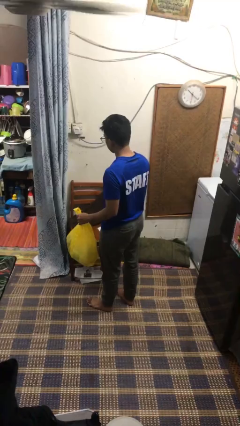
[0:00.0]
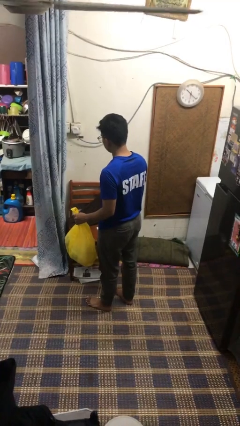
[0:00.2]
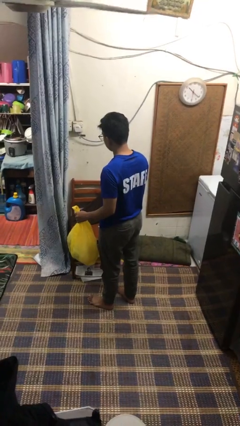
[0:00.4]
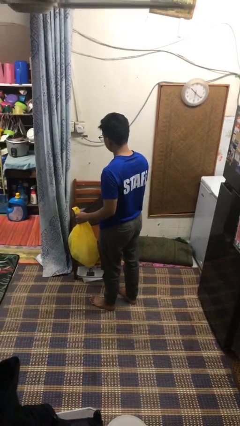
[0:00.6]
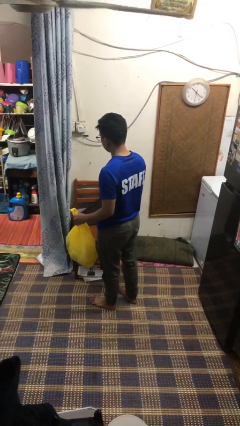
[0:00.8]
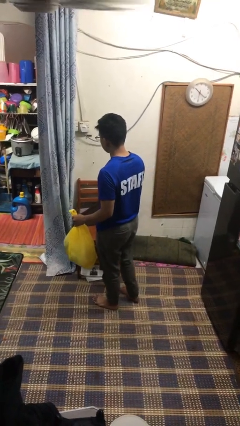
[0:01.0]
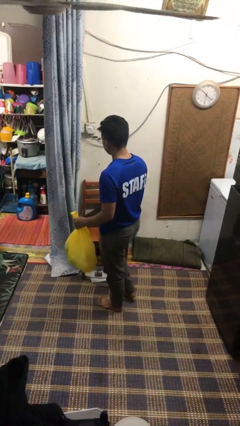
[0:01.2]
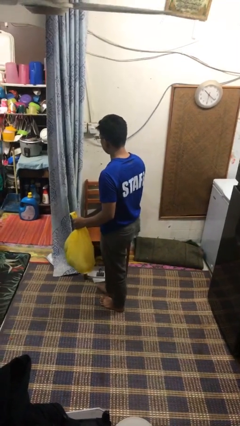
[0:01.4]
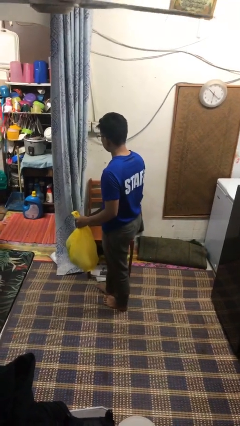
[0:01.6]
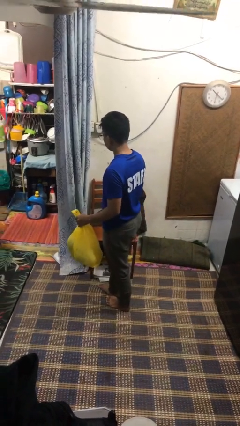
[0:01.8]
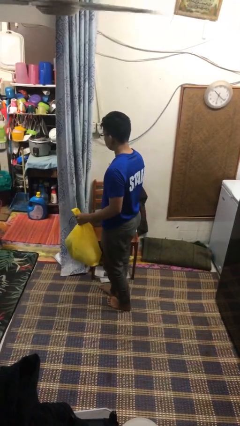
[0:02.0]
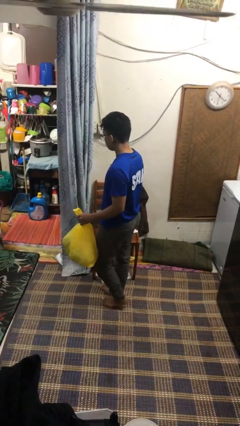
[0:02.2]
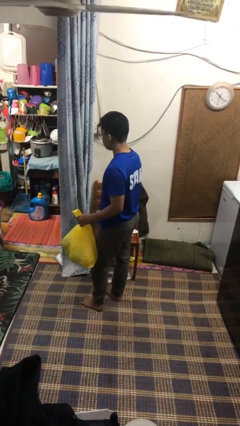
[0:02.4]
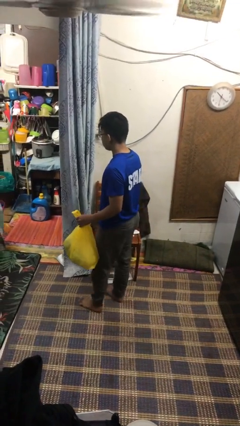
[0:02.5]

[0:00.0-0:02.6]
person carries groceries

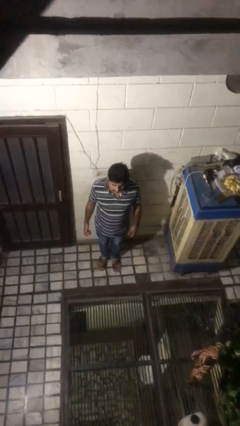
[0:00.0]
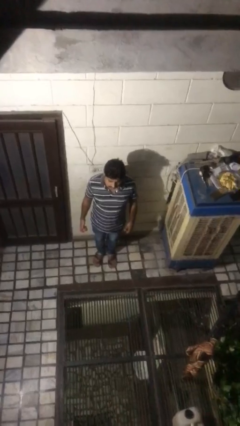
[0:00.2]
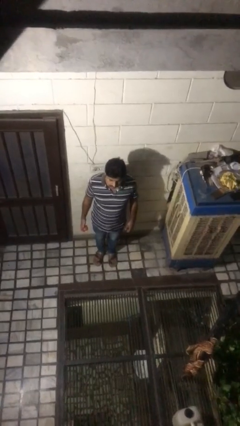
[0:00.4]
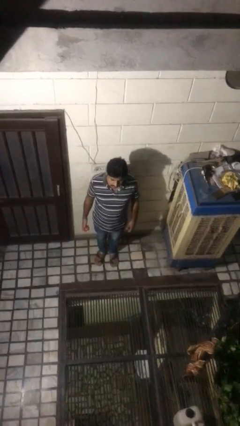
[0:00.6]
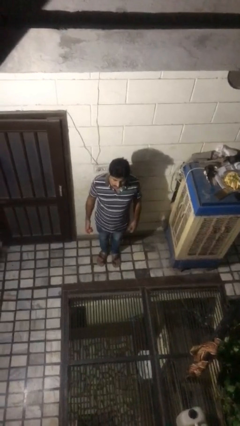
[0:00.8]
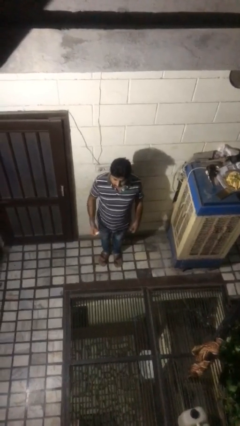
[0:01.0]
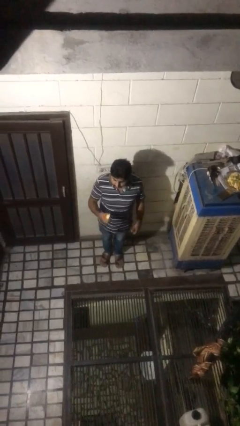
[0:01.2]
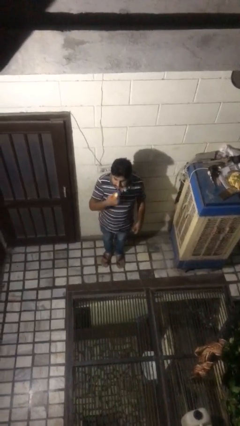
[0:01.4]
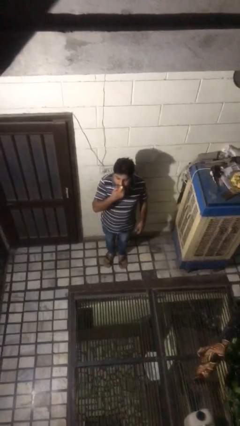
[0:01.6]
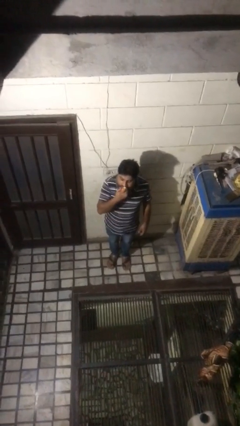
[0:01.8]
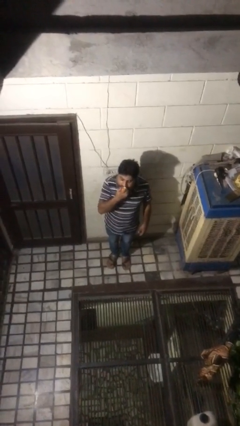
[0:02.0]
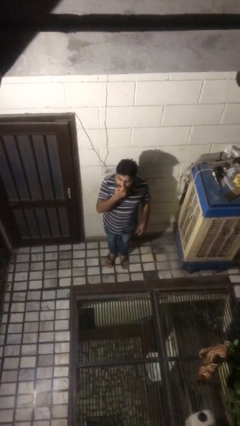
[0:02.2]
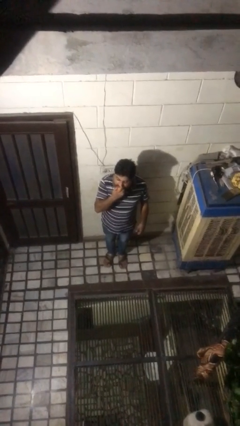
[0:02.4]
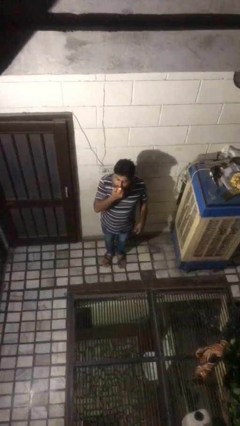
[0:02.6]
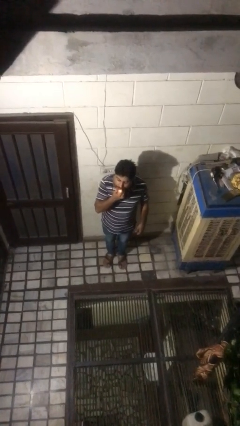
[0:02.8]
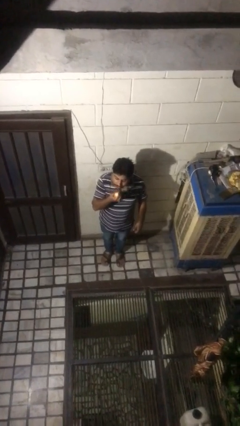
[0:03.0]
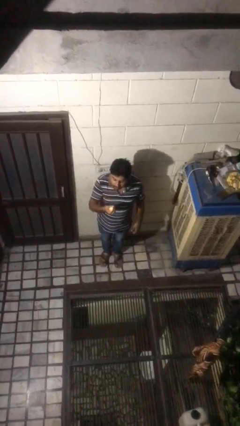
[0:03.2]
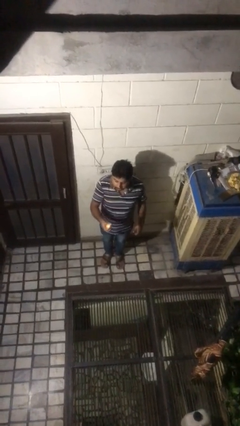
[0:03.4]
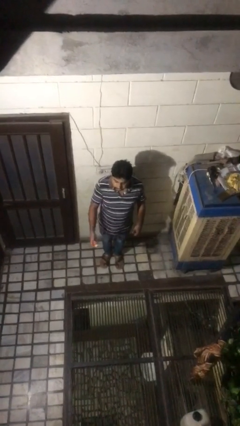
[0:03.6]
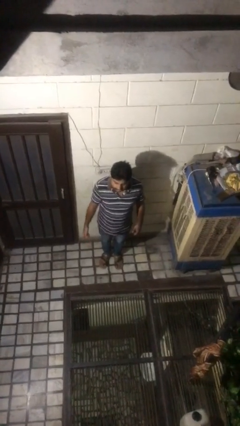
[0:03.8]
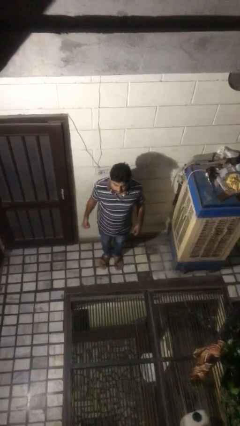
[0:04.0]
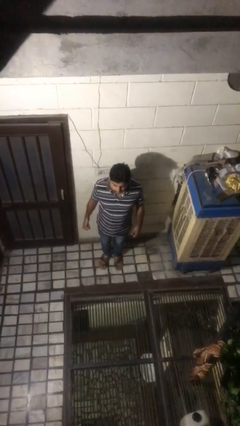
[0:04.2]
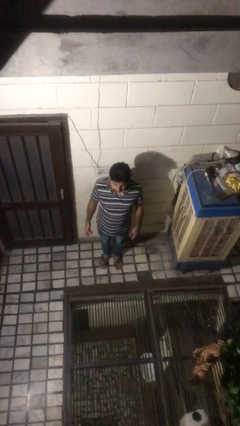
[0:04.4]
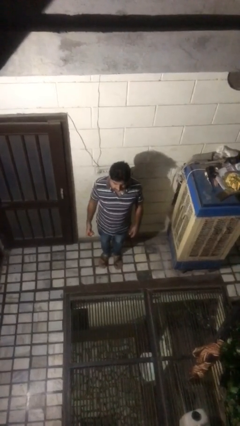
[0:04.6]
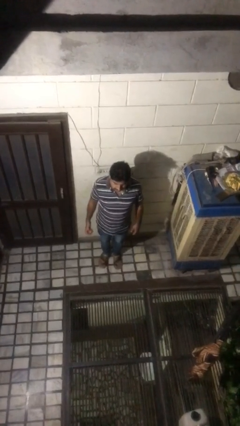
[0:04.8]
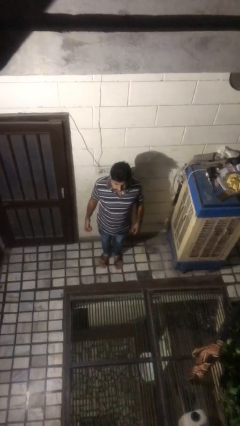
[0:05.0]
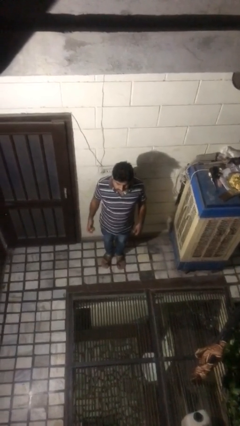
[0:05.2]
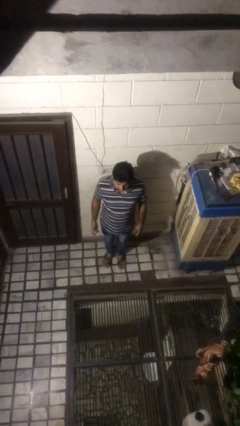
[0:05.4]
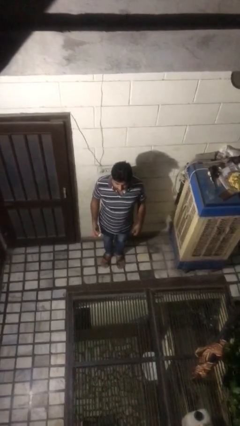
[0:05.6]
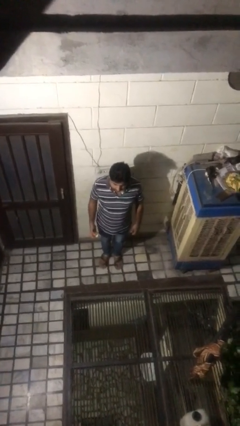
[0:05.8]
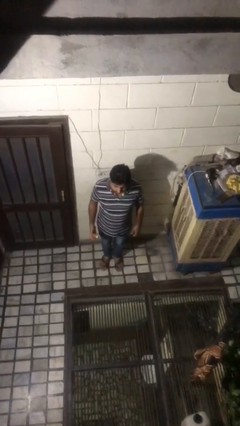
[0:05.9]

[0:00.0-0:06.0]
person eats apple

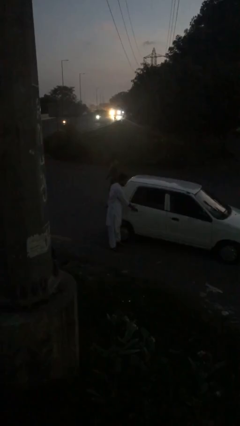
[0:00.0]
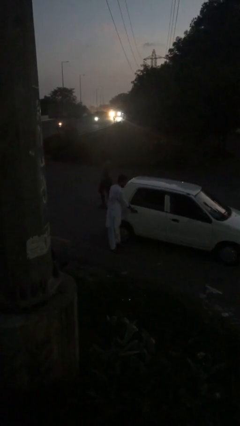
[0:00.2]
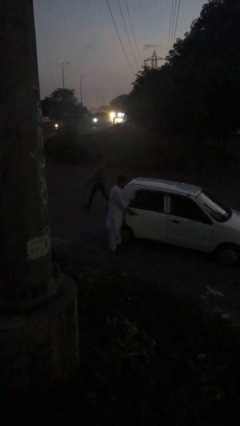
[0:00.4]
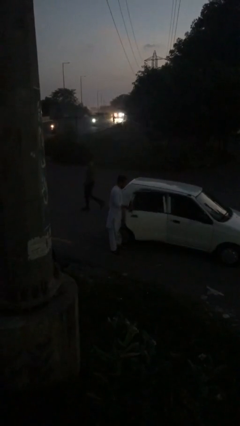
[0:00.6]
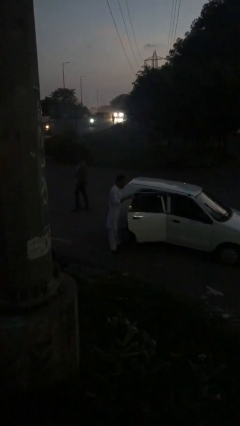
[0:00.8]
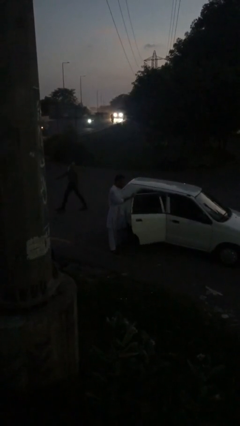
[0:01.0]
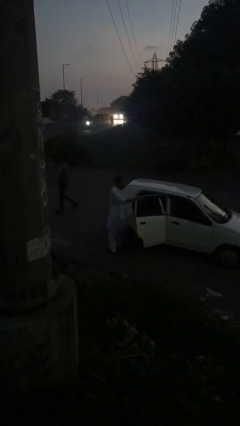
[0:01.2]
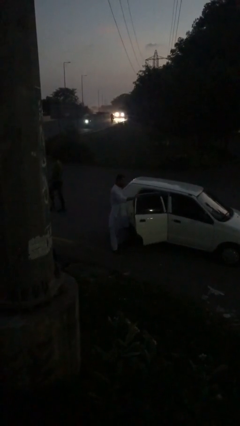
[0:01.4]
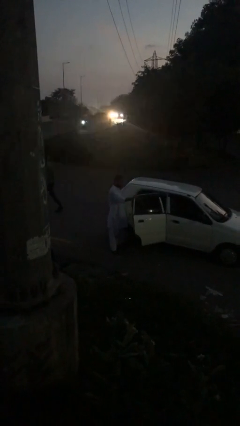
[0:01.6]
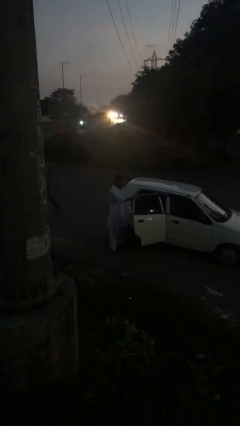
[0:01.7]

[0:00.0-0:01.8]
person opens car door

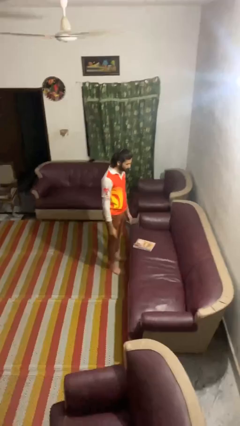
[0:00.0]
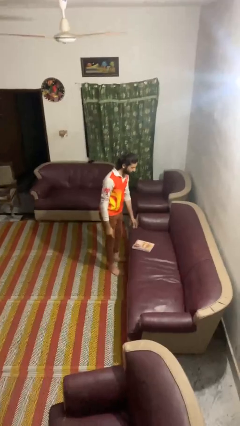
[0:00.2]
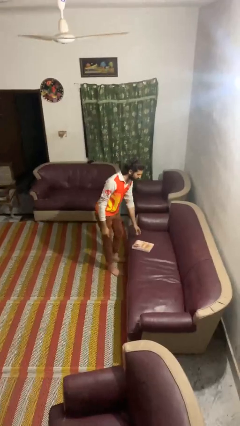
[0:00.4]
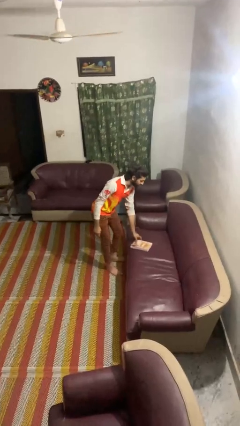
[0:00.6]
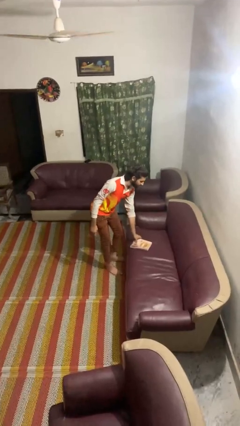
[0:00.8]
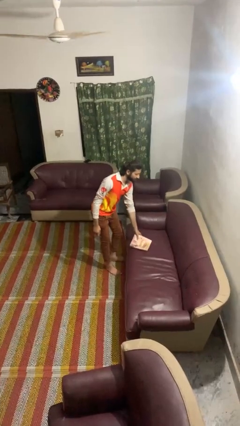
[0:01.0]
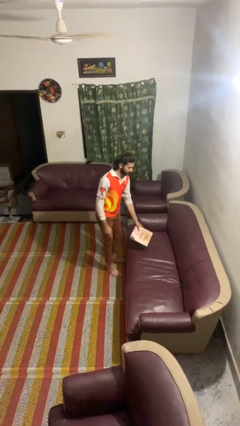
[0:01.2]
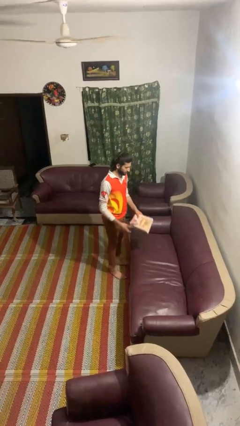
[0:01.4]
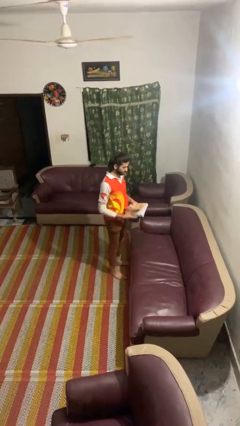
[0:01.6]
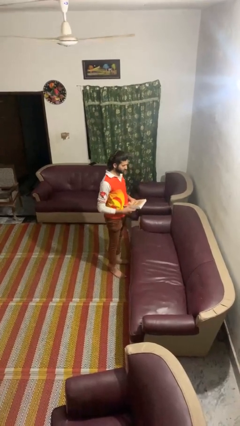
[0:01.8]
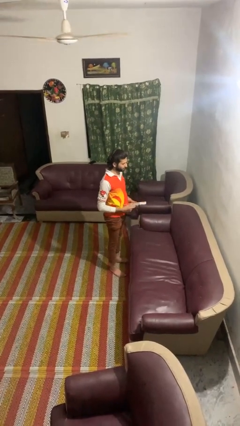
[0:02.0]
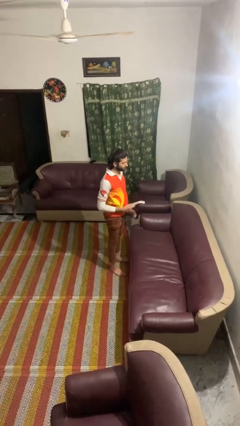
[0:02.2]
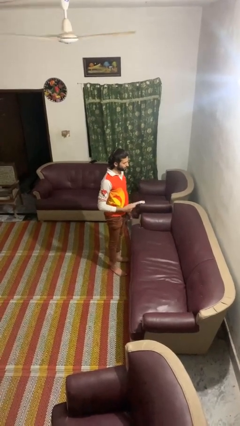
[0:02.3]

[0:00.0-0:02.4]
person picks up object from couch

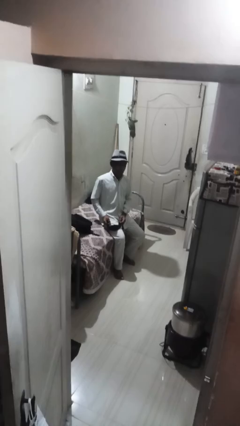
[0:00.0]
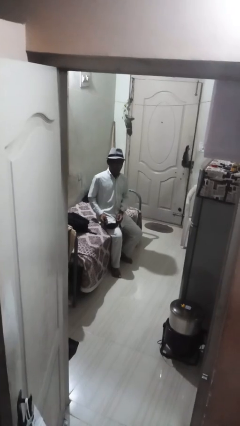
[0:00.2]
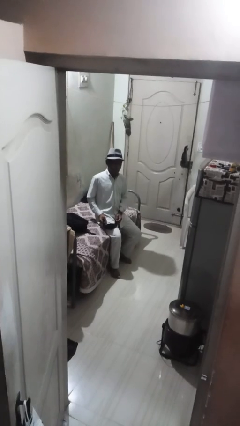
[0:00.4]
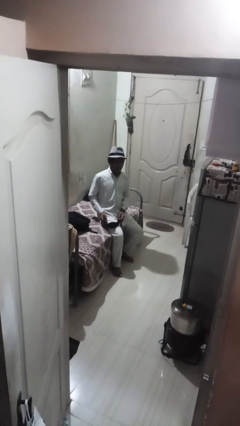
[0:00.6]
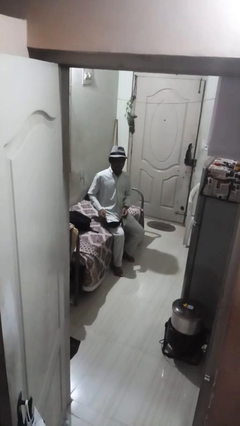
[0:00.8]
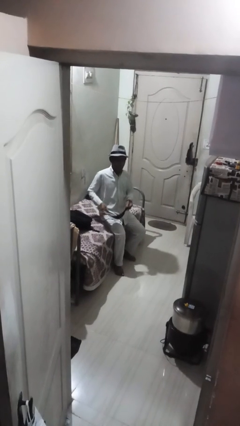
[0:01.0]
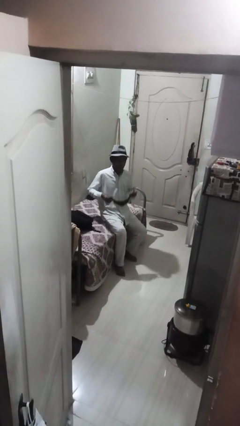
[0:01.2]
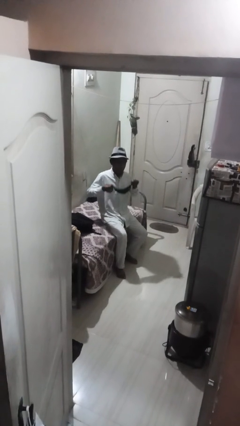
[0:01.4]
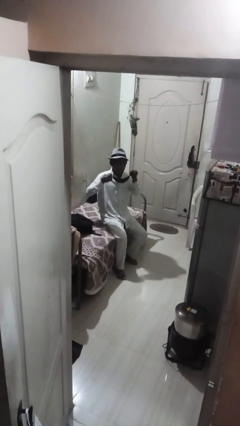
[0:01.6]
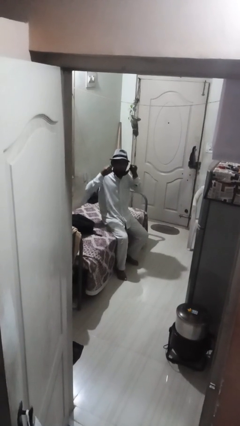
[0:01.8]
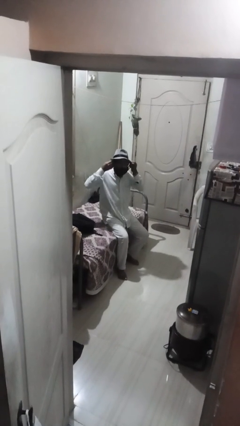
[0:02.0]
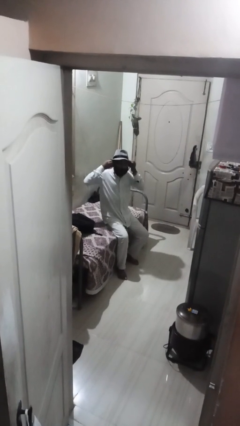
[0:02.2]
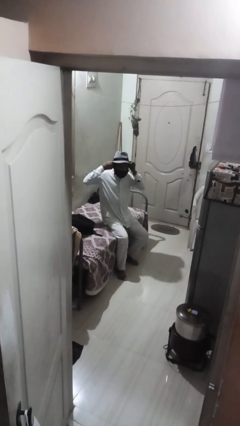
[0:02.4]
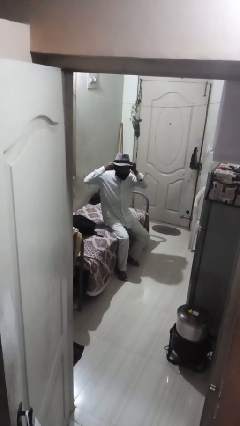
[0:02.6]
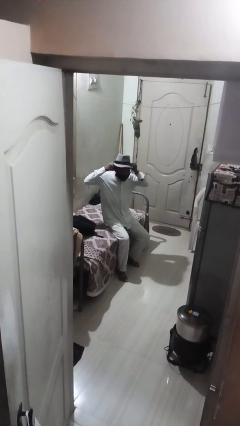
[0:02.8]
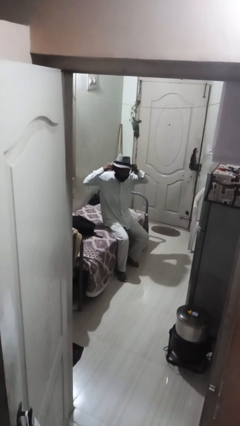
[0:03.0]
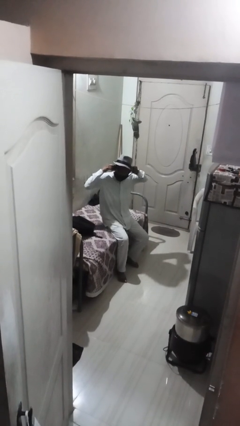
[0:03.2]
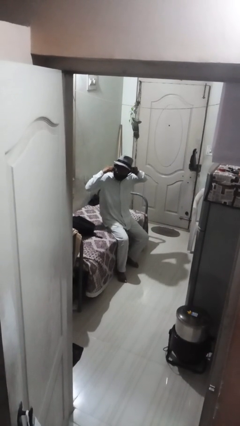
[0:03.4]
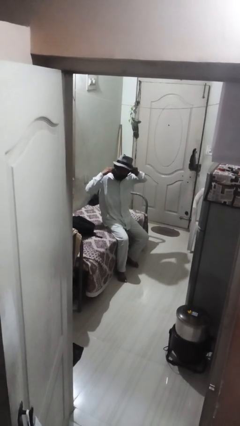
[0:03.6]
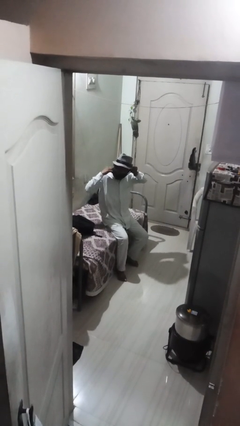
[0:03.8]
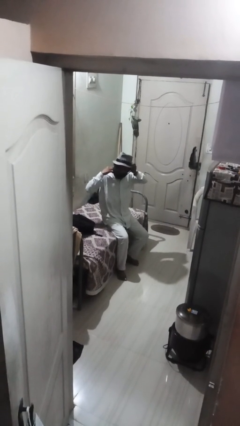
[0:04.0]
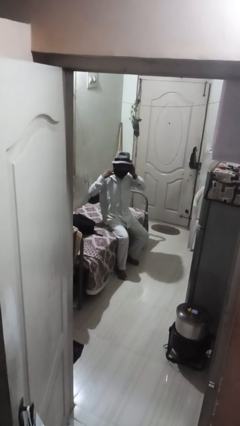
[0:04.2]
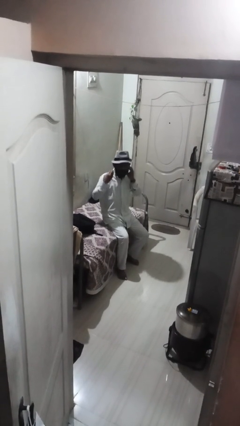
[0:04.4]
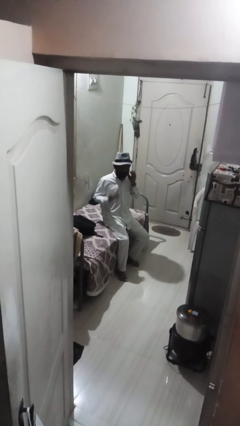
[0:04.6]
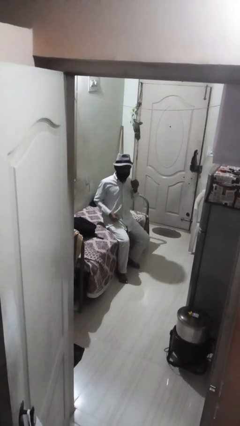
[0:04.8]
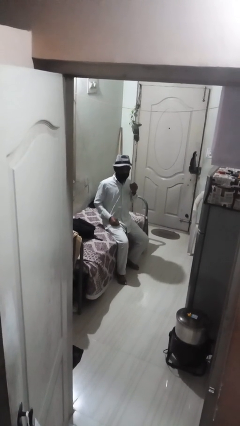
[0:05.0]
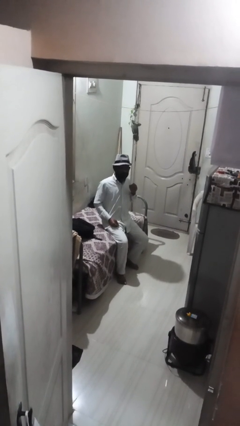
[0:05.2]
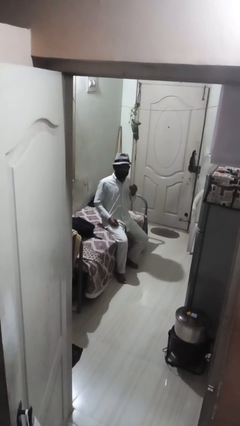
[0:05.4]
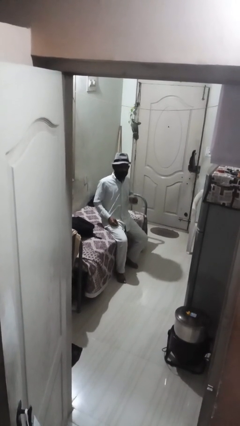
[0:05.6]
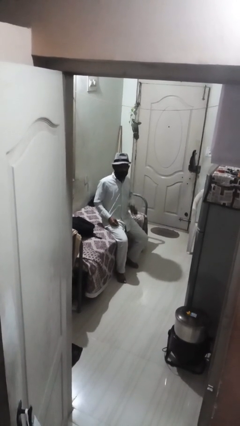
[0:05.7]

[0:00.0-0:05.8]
person puts on facemask
